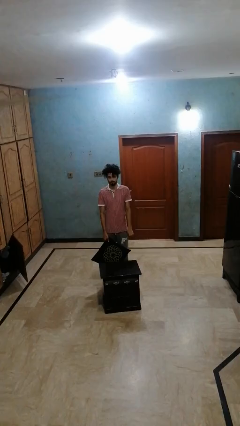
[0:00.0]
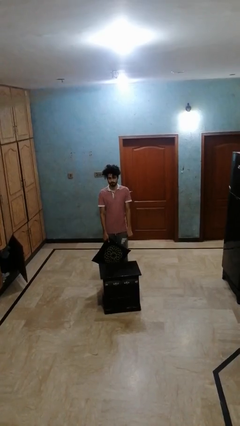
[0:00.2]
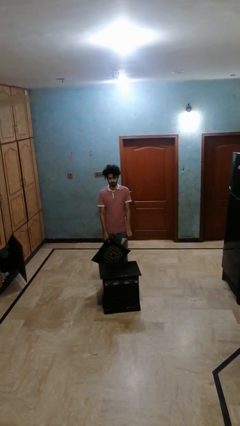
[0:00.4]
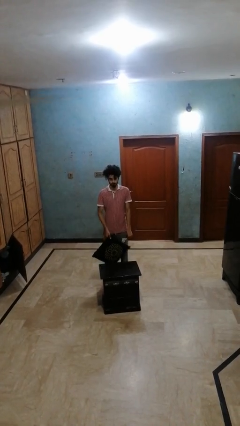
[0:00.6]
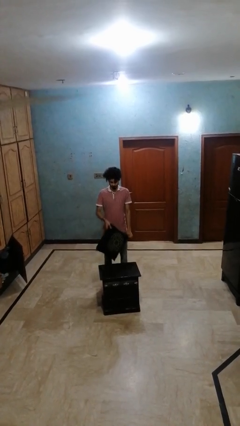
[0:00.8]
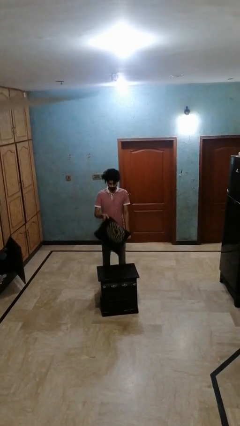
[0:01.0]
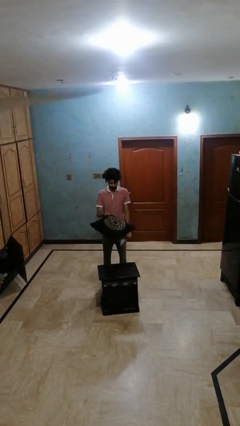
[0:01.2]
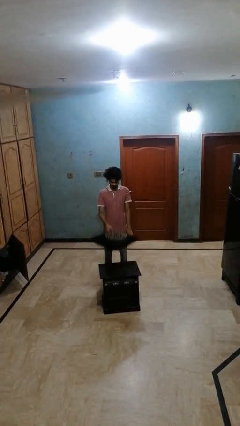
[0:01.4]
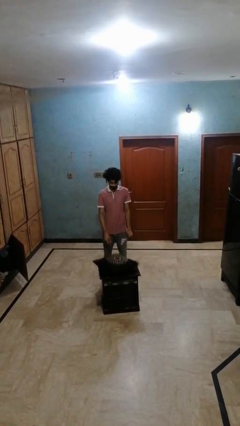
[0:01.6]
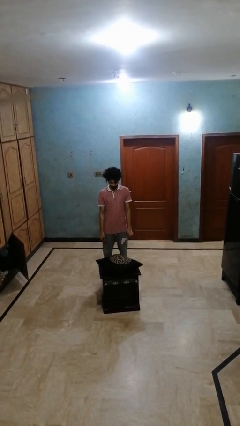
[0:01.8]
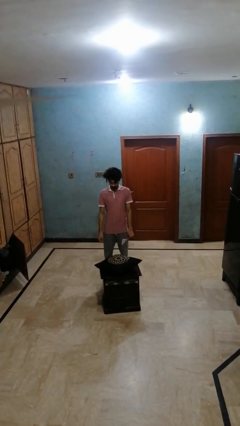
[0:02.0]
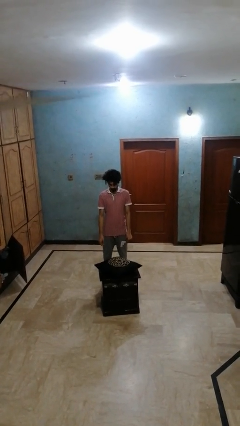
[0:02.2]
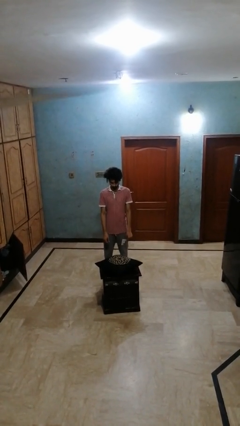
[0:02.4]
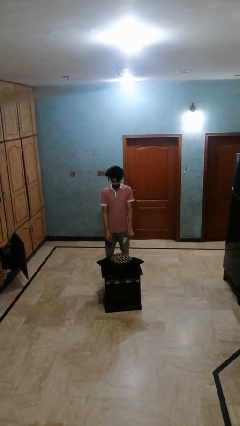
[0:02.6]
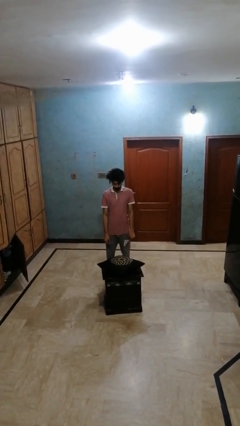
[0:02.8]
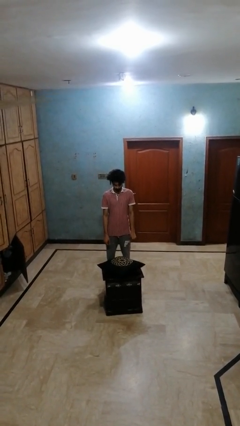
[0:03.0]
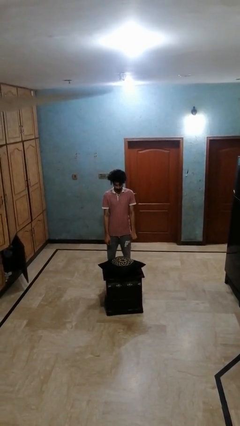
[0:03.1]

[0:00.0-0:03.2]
person throws object on table

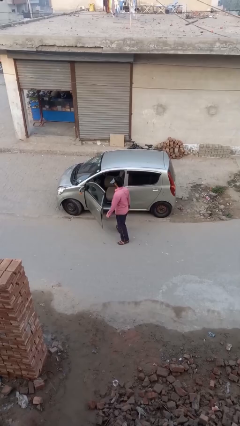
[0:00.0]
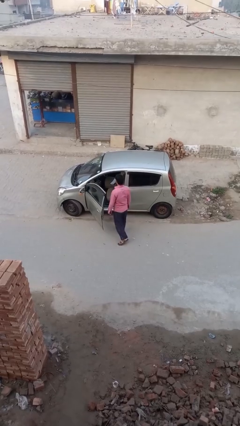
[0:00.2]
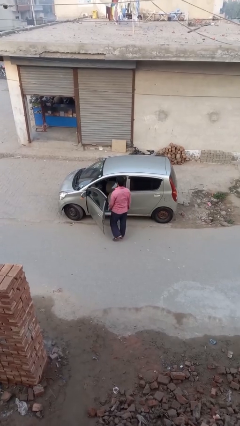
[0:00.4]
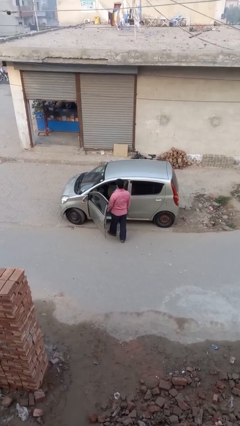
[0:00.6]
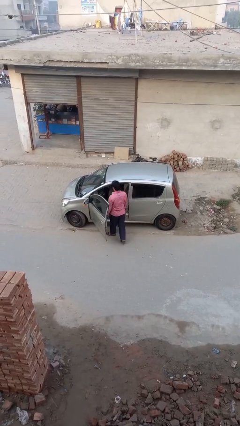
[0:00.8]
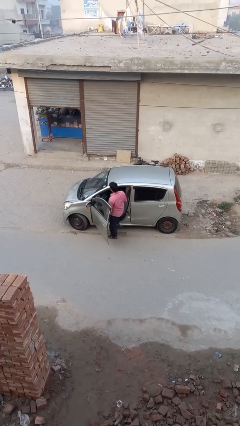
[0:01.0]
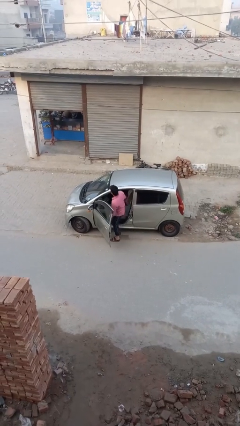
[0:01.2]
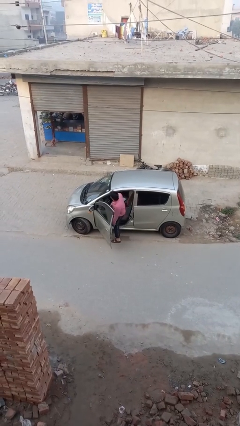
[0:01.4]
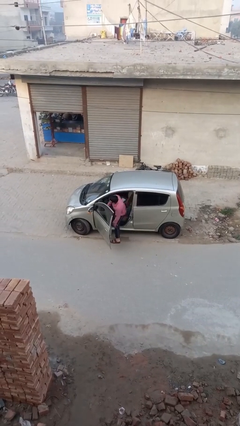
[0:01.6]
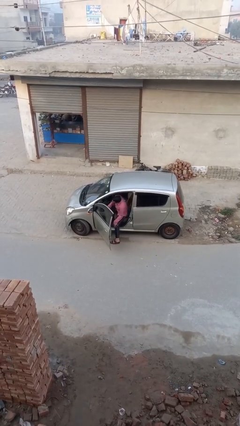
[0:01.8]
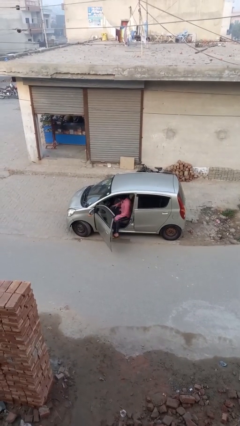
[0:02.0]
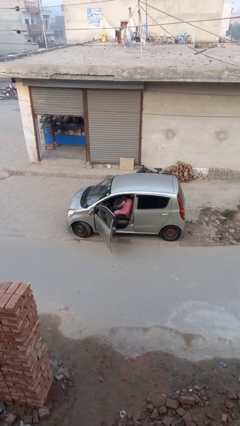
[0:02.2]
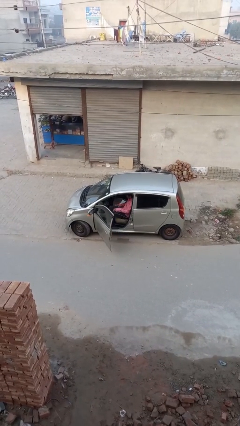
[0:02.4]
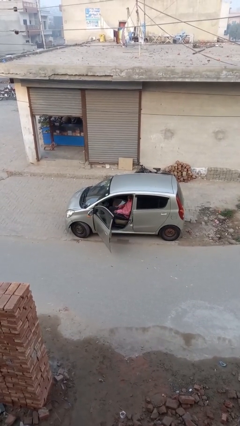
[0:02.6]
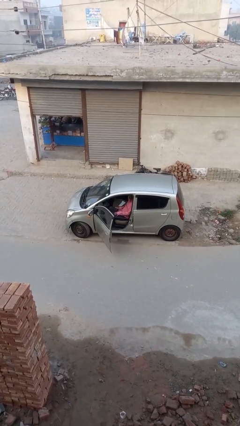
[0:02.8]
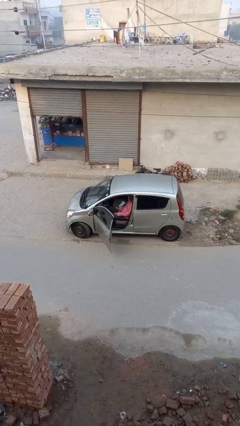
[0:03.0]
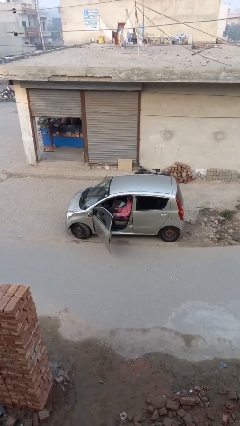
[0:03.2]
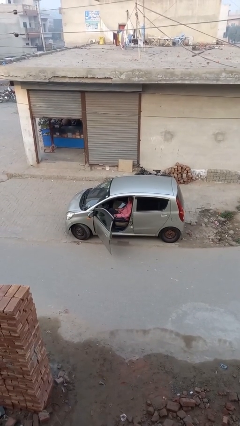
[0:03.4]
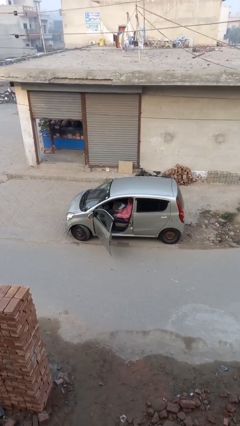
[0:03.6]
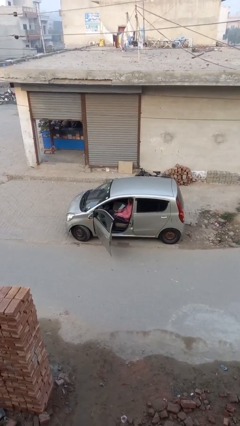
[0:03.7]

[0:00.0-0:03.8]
person enters car

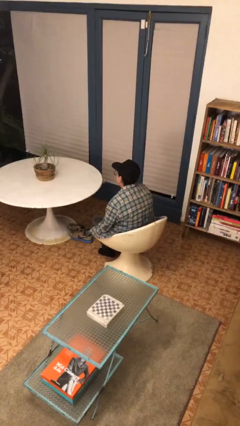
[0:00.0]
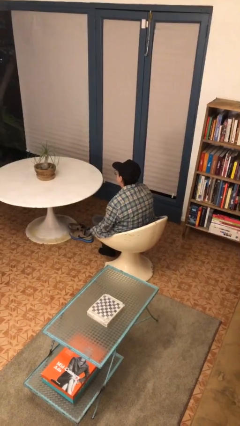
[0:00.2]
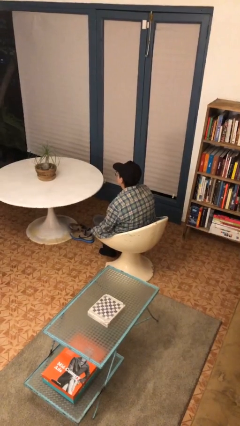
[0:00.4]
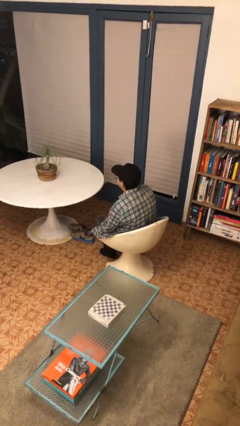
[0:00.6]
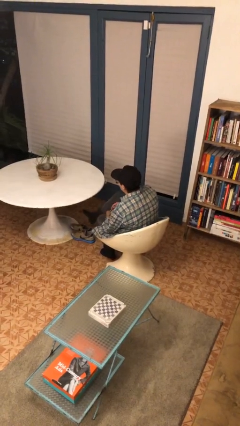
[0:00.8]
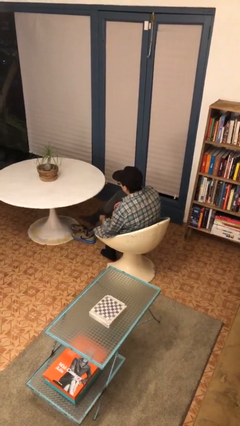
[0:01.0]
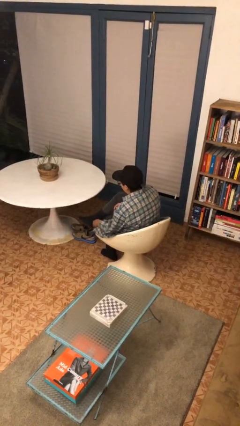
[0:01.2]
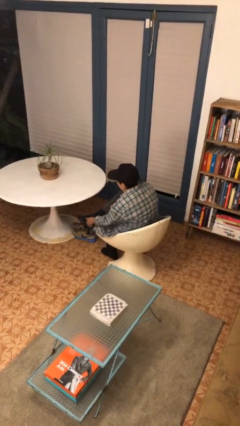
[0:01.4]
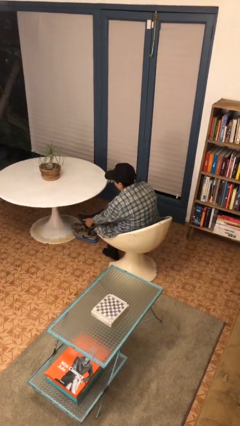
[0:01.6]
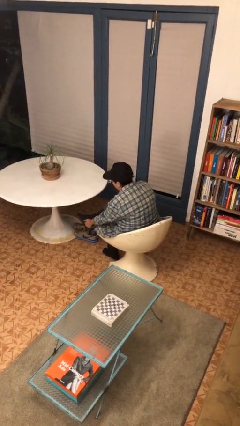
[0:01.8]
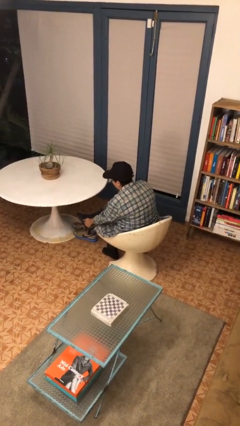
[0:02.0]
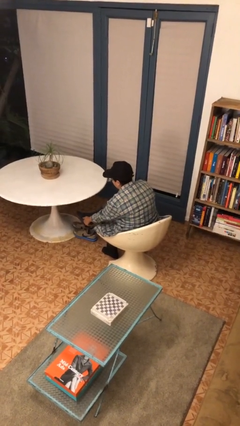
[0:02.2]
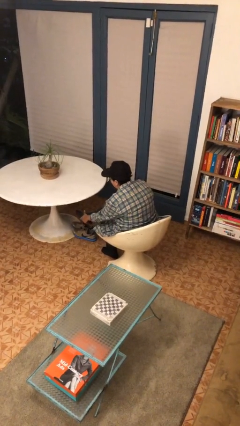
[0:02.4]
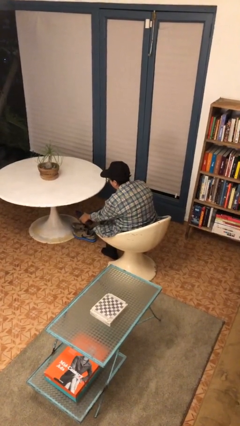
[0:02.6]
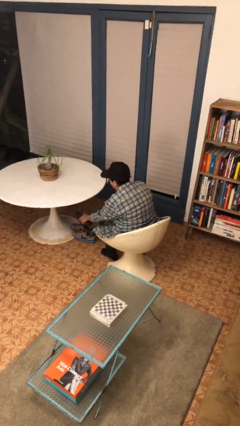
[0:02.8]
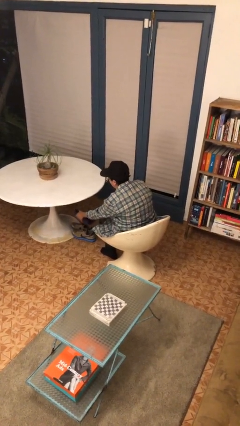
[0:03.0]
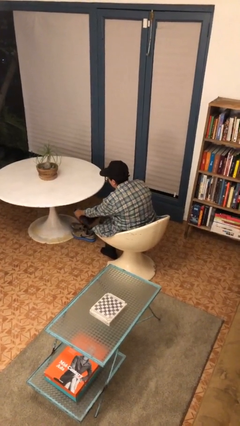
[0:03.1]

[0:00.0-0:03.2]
person rubs foot

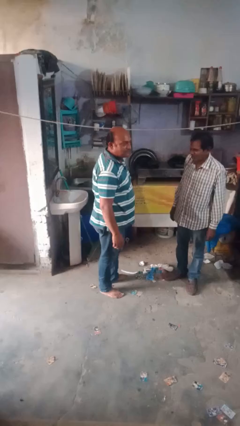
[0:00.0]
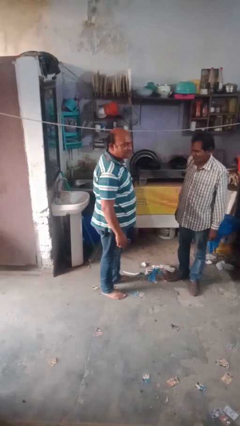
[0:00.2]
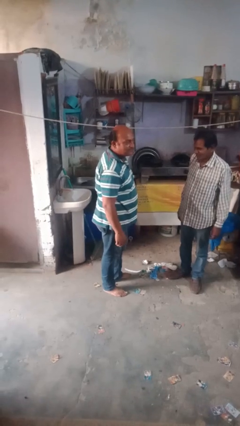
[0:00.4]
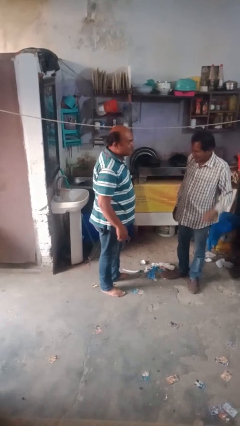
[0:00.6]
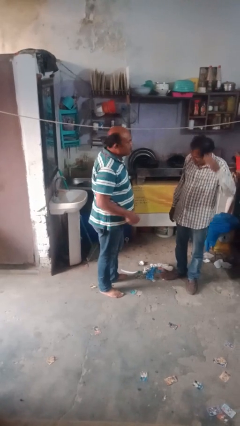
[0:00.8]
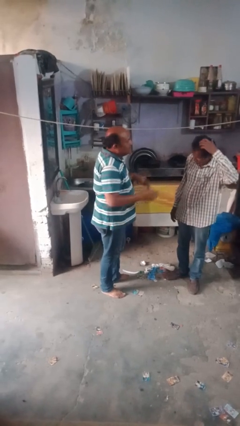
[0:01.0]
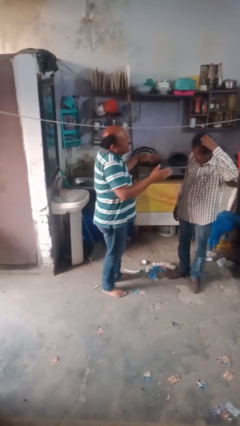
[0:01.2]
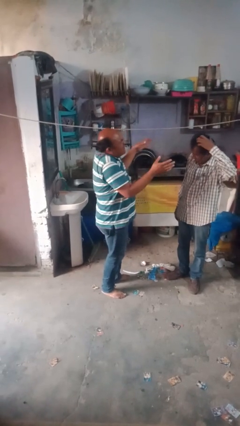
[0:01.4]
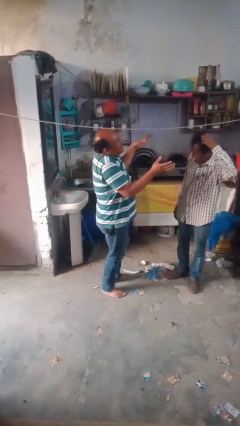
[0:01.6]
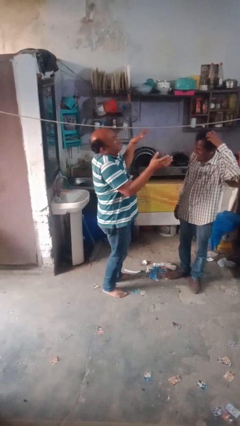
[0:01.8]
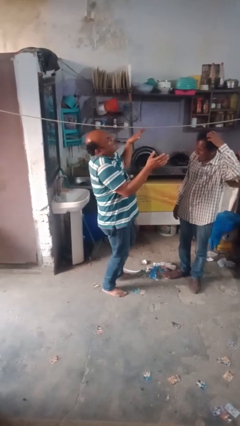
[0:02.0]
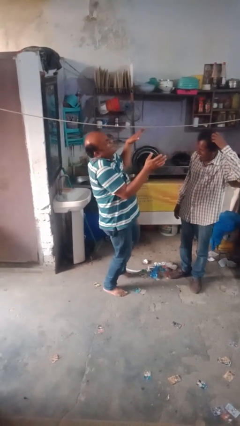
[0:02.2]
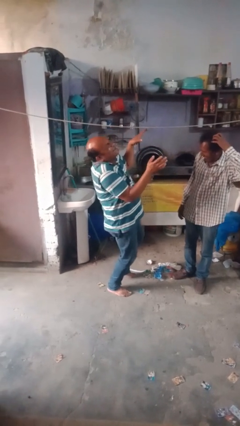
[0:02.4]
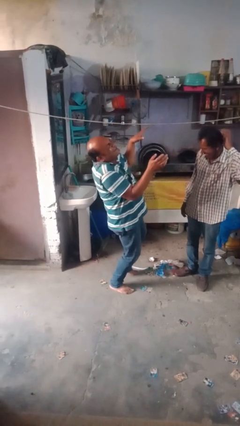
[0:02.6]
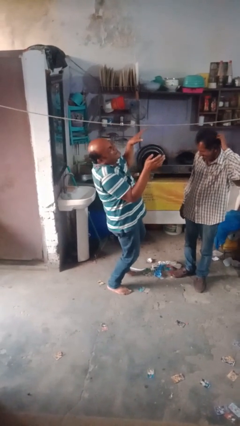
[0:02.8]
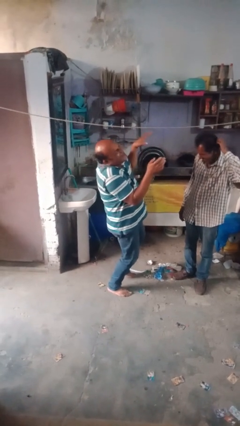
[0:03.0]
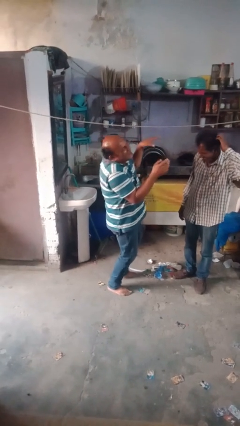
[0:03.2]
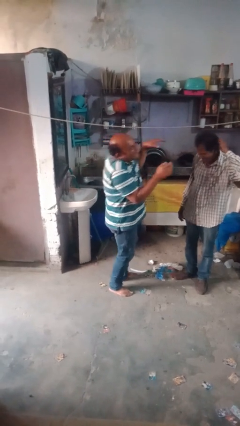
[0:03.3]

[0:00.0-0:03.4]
person laughs with person

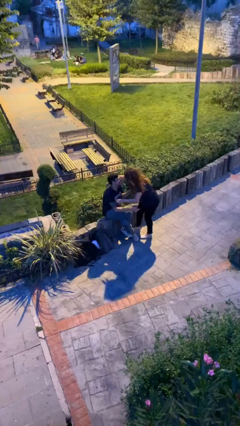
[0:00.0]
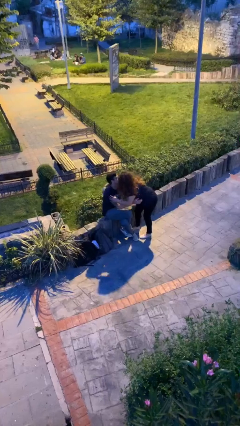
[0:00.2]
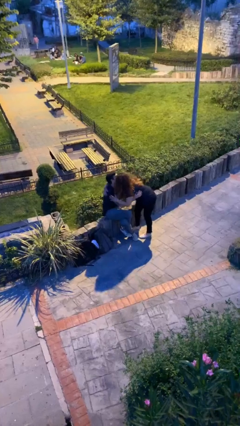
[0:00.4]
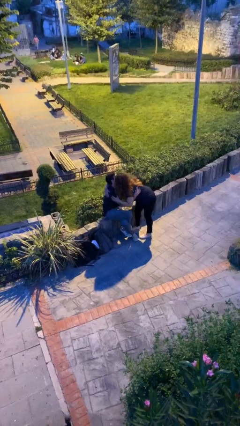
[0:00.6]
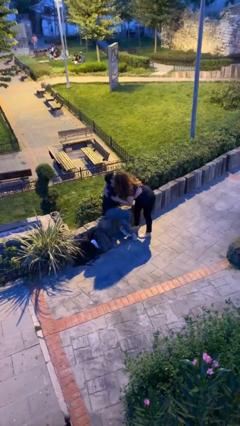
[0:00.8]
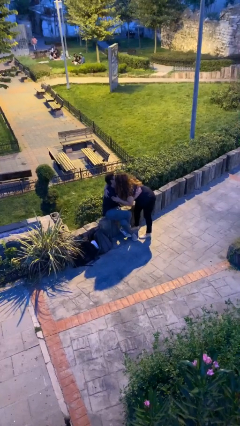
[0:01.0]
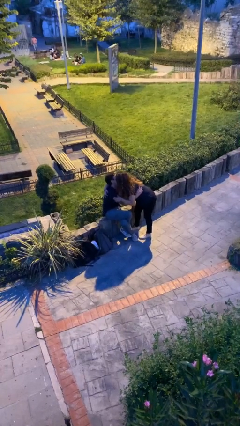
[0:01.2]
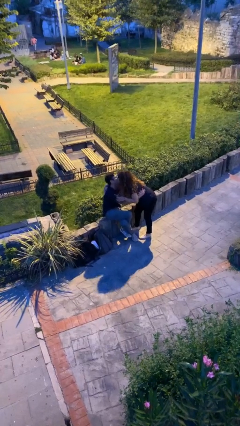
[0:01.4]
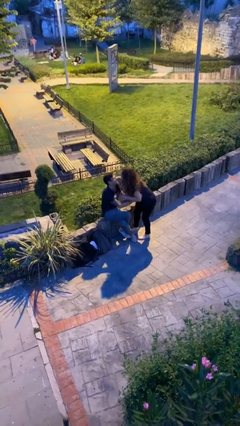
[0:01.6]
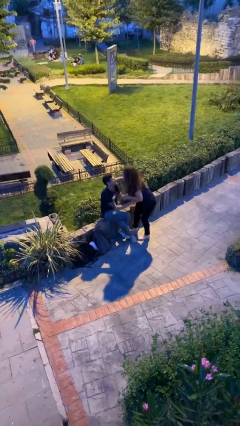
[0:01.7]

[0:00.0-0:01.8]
person embraces person

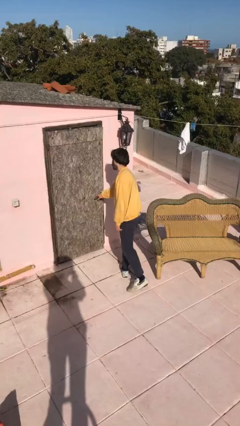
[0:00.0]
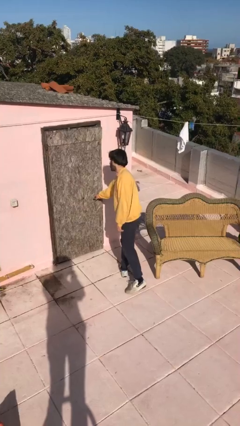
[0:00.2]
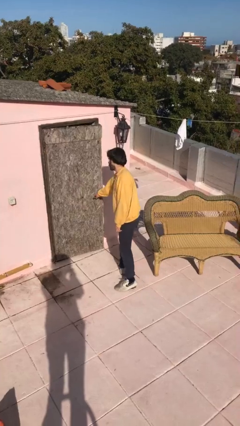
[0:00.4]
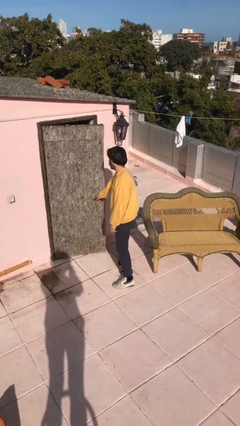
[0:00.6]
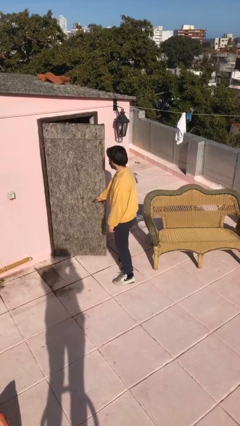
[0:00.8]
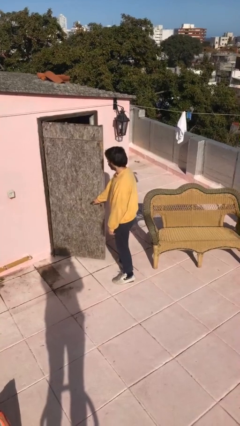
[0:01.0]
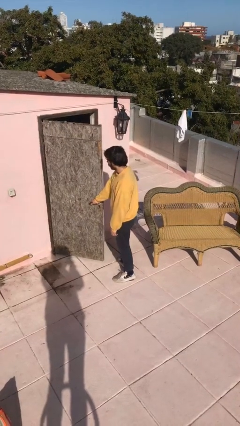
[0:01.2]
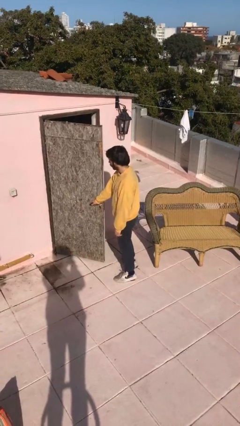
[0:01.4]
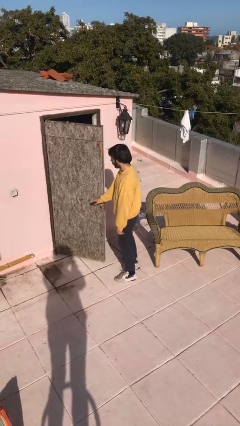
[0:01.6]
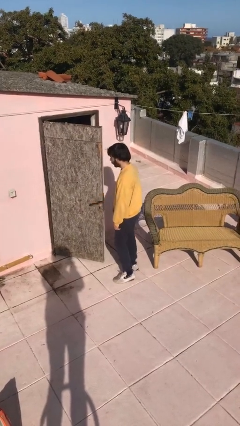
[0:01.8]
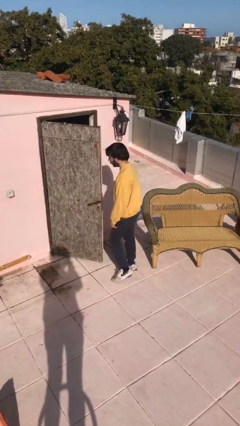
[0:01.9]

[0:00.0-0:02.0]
person opens facility door
